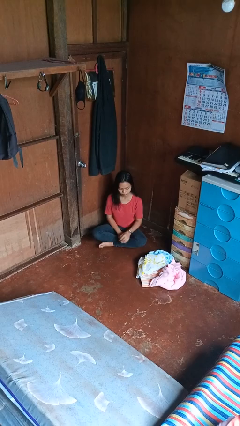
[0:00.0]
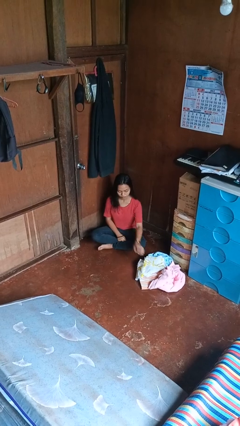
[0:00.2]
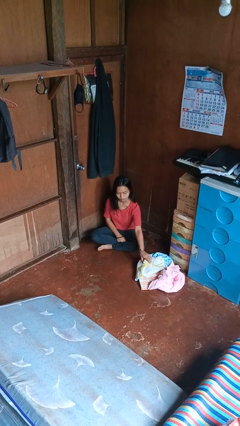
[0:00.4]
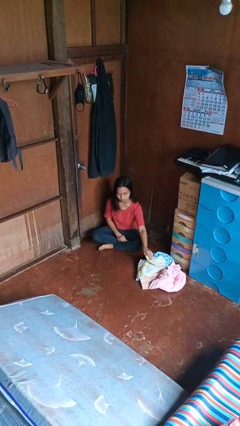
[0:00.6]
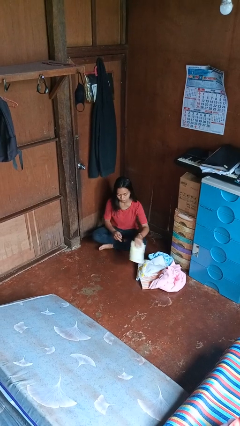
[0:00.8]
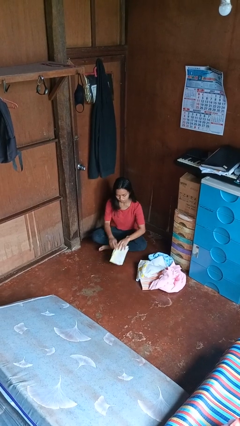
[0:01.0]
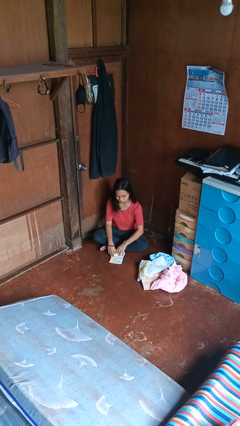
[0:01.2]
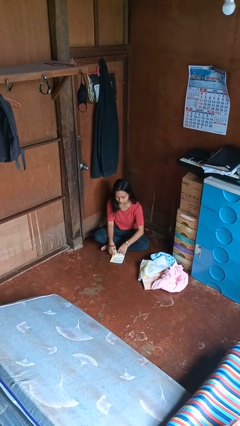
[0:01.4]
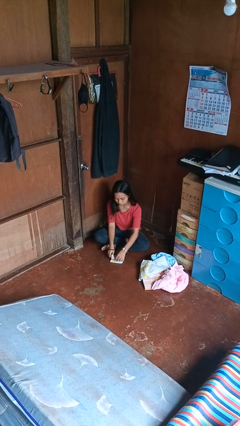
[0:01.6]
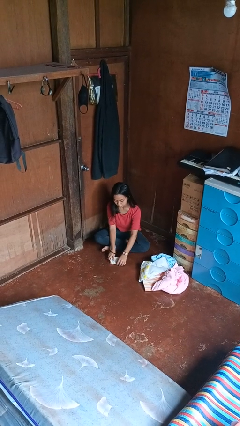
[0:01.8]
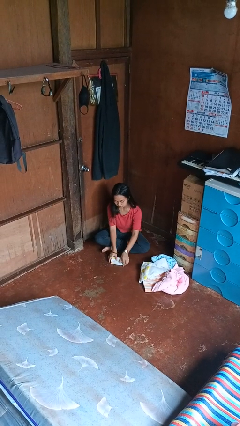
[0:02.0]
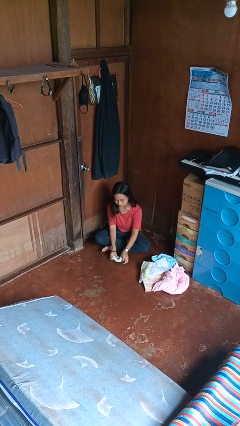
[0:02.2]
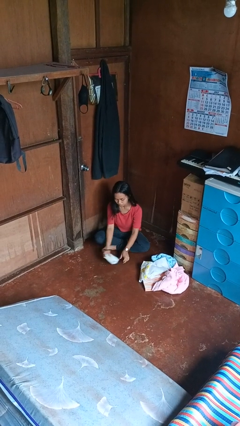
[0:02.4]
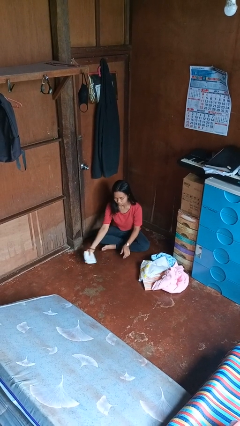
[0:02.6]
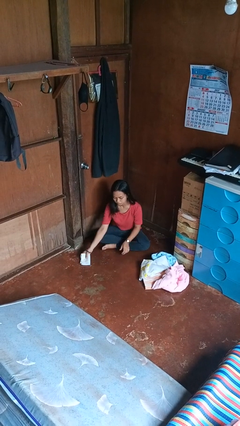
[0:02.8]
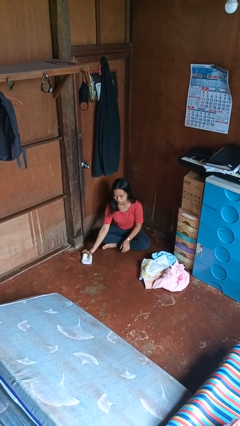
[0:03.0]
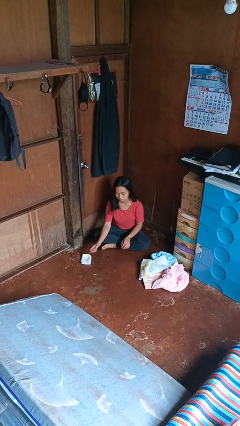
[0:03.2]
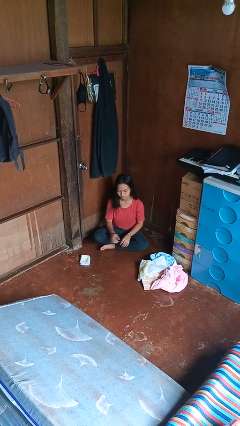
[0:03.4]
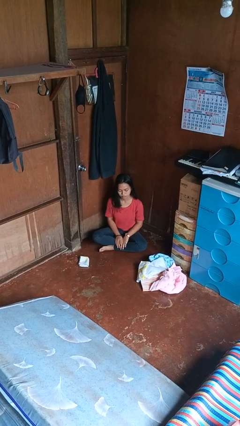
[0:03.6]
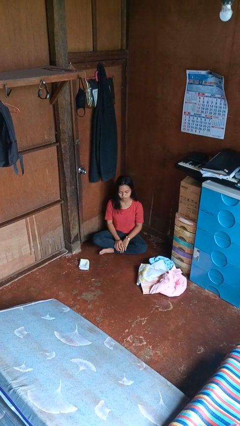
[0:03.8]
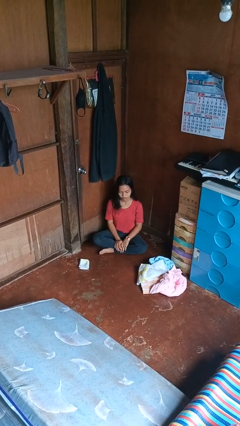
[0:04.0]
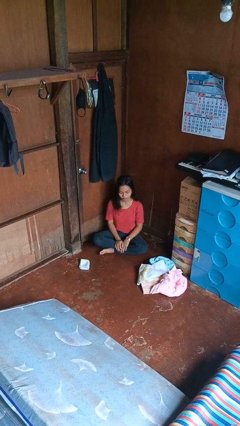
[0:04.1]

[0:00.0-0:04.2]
person folds towel

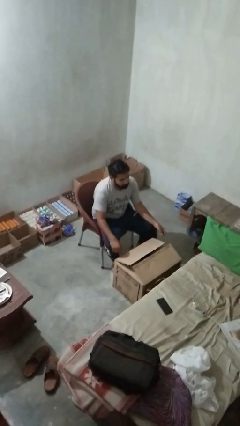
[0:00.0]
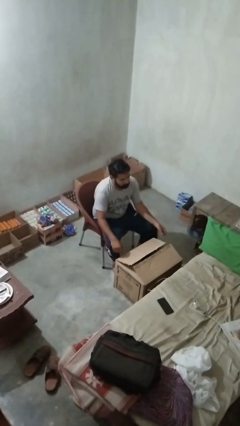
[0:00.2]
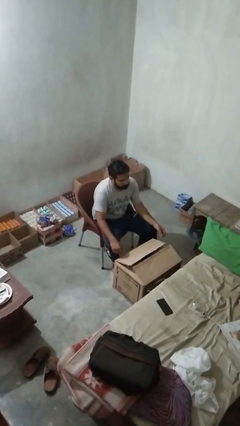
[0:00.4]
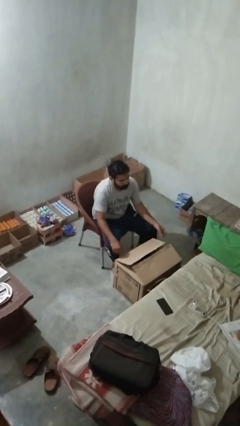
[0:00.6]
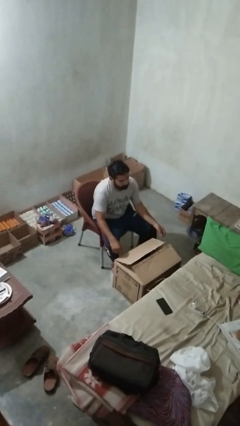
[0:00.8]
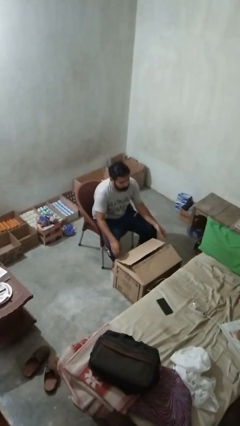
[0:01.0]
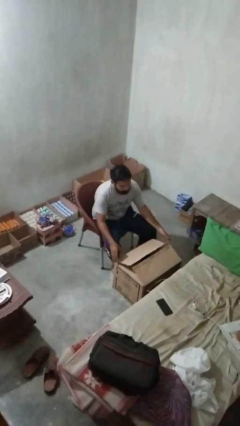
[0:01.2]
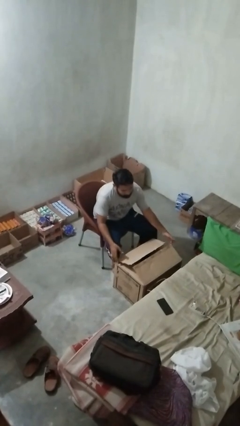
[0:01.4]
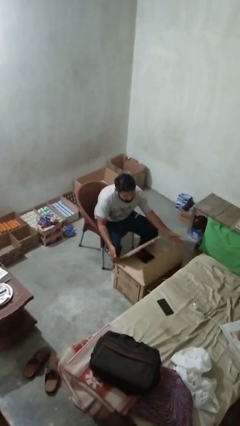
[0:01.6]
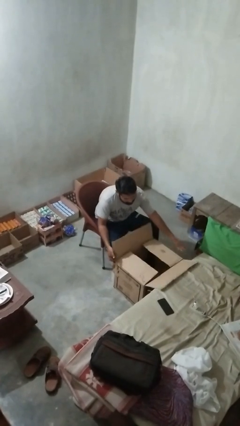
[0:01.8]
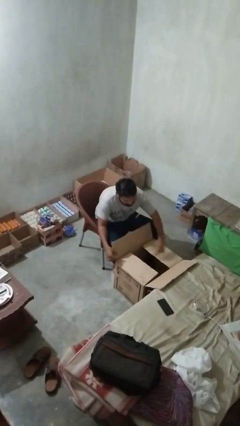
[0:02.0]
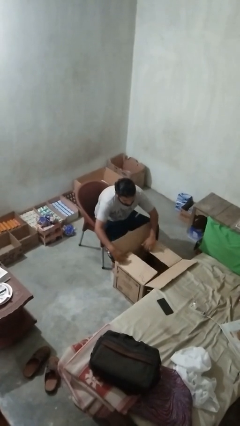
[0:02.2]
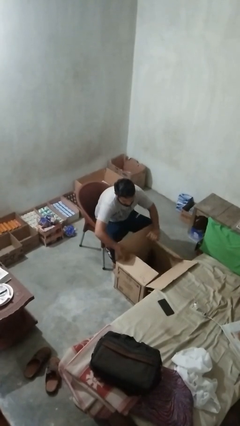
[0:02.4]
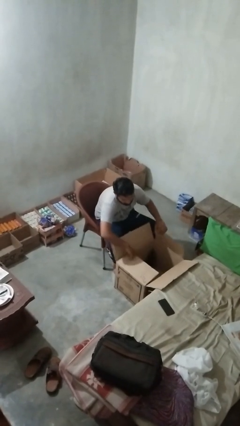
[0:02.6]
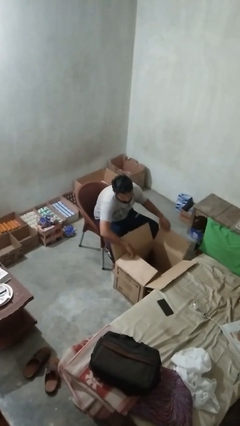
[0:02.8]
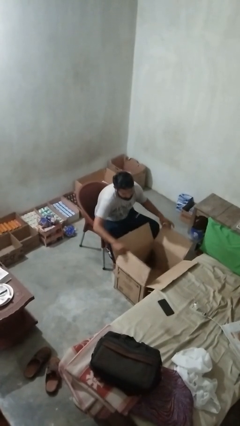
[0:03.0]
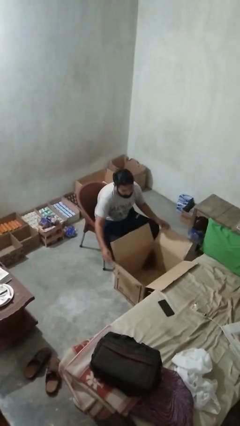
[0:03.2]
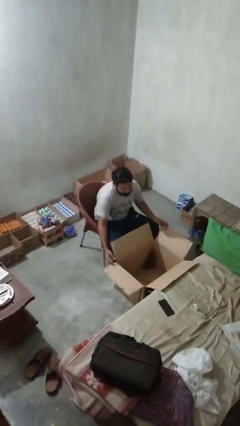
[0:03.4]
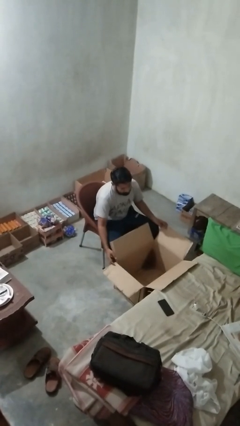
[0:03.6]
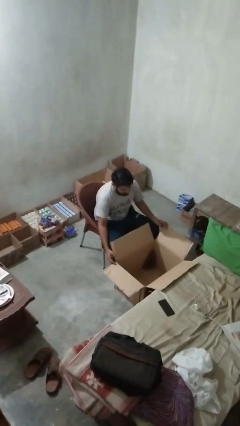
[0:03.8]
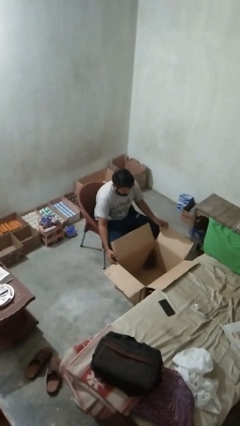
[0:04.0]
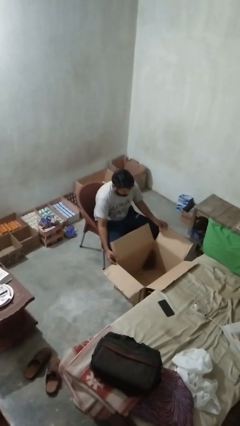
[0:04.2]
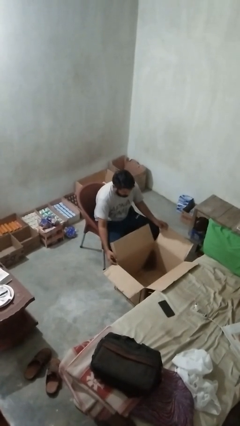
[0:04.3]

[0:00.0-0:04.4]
person opens box

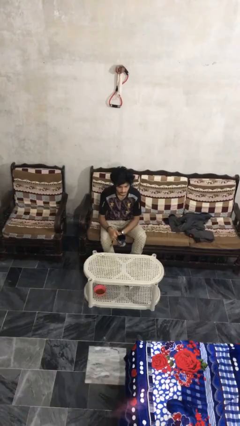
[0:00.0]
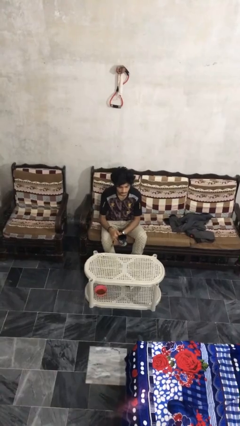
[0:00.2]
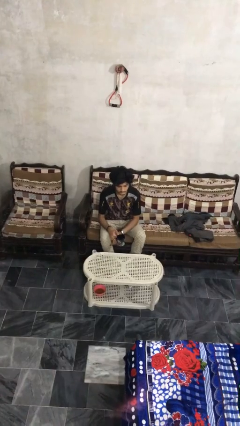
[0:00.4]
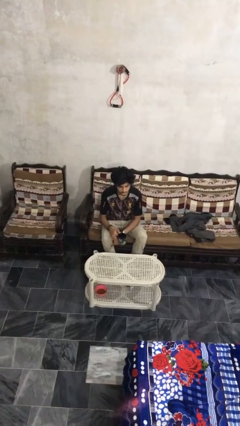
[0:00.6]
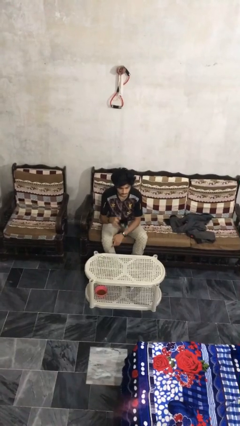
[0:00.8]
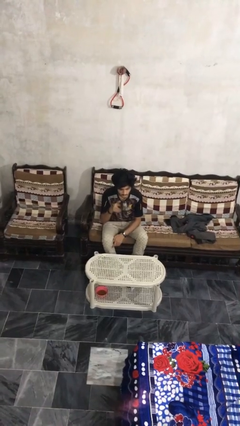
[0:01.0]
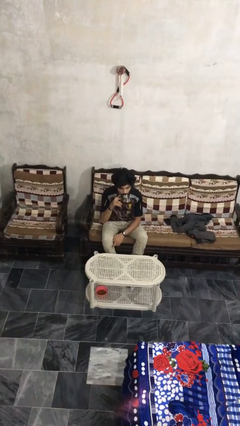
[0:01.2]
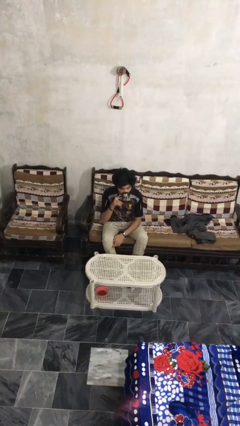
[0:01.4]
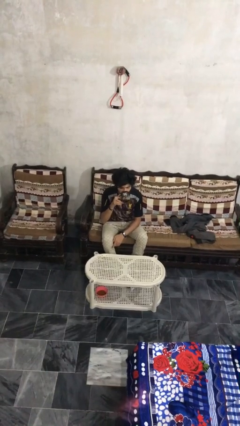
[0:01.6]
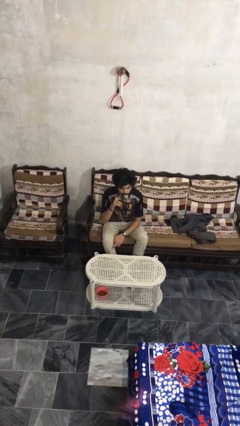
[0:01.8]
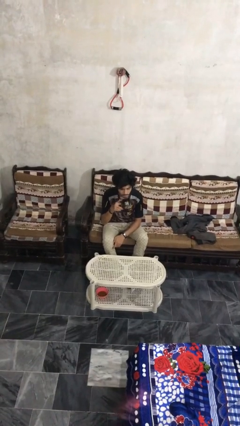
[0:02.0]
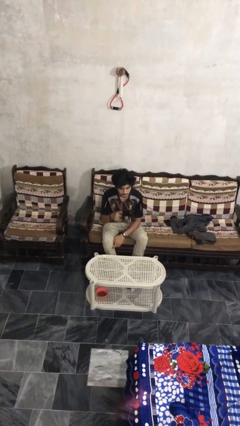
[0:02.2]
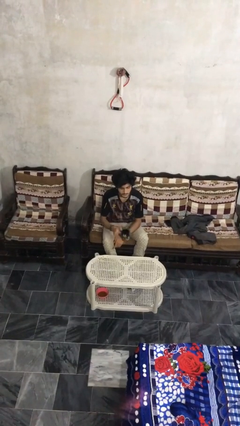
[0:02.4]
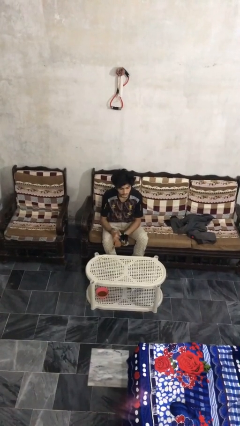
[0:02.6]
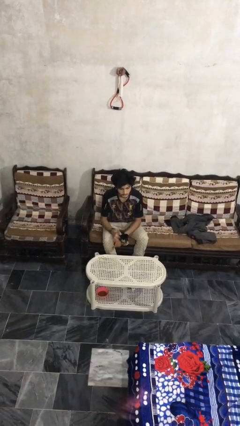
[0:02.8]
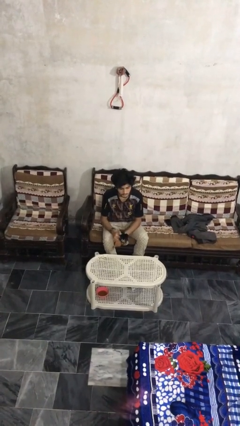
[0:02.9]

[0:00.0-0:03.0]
person drinks from mug

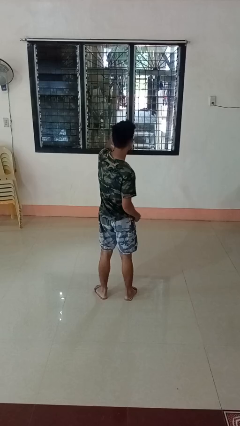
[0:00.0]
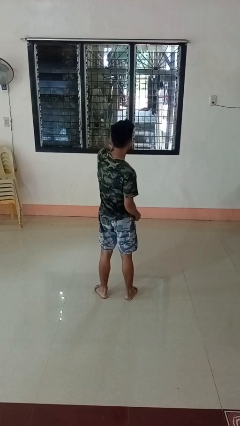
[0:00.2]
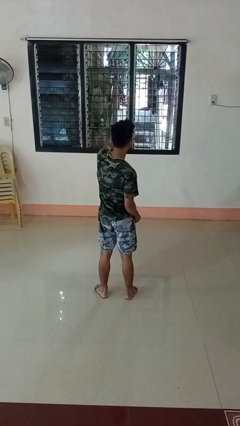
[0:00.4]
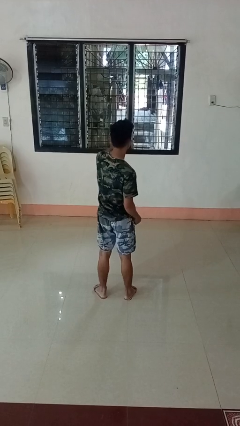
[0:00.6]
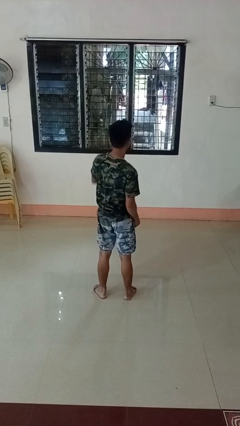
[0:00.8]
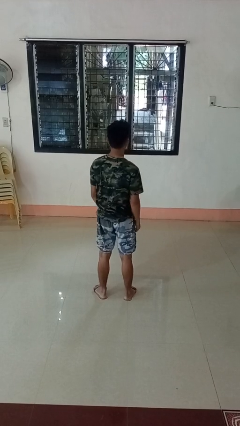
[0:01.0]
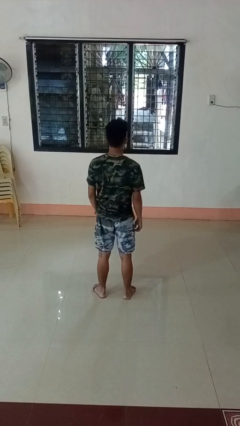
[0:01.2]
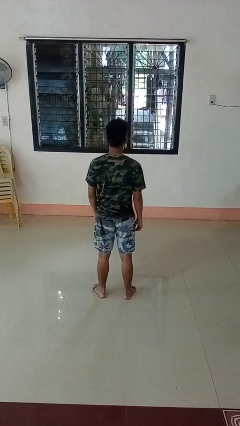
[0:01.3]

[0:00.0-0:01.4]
person punches

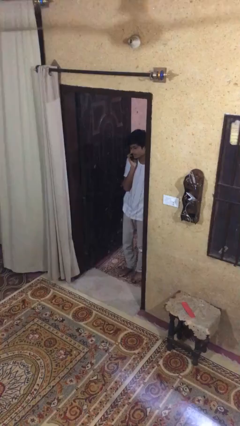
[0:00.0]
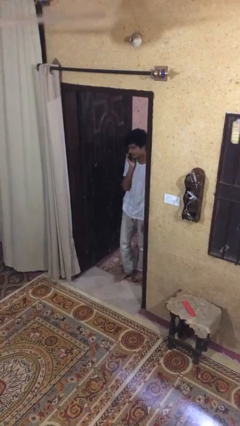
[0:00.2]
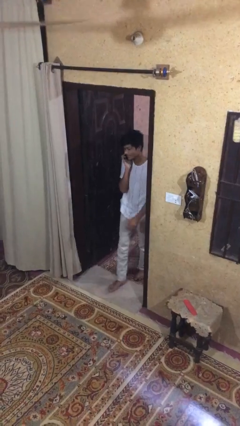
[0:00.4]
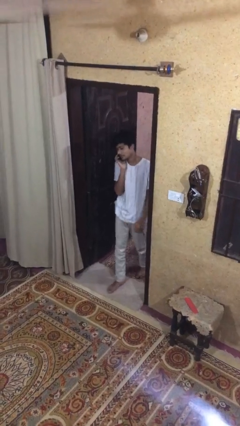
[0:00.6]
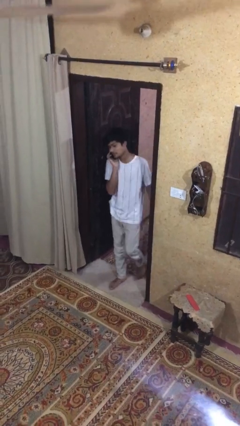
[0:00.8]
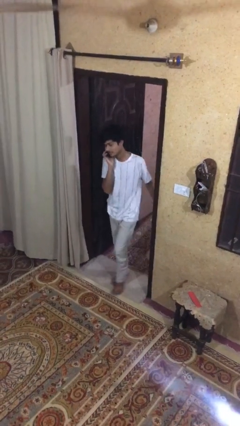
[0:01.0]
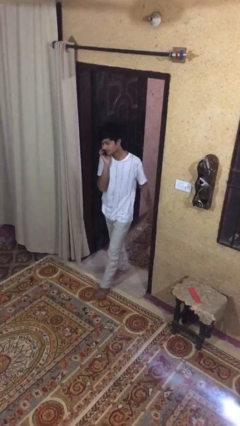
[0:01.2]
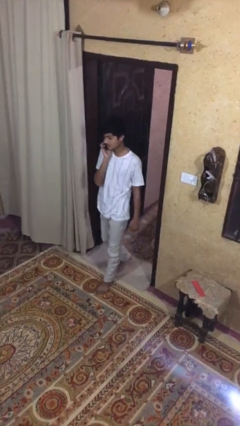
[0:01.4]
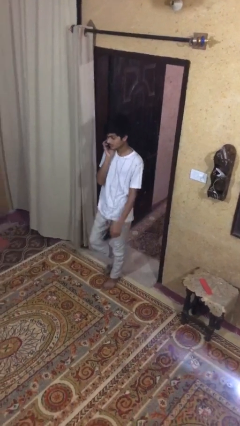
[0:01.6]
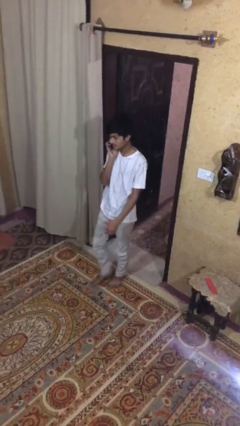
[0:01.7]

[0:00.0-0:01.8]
person enters scene through structure

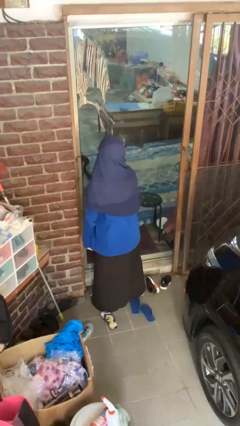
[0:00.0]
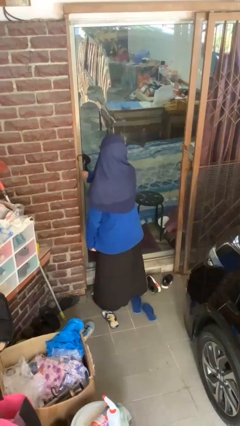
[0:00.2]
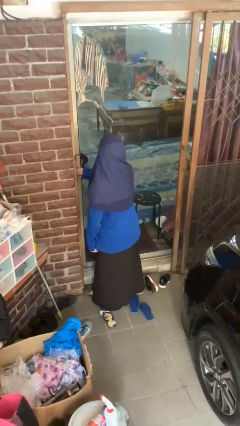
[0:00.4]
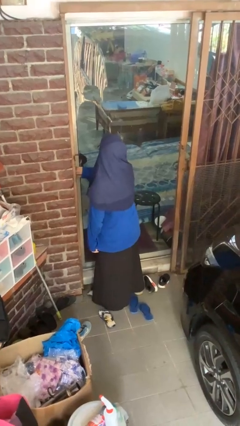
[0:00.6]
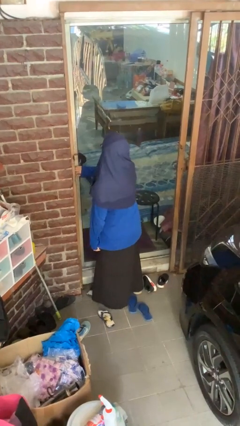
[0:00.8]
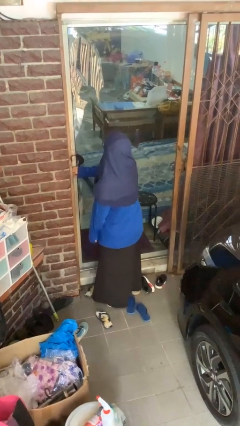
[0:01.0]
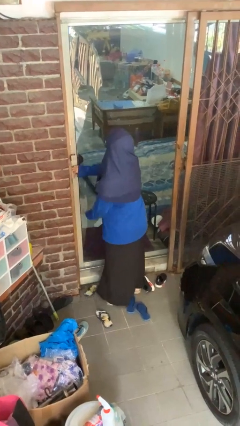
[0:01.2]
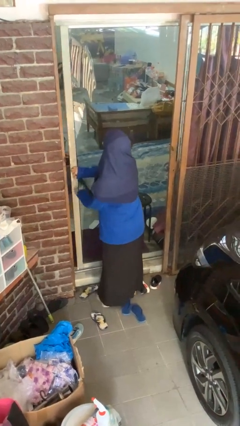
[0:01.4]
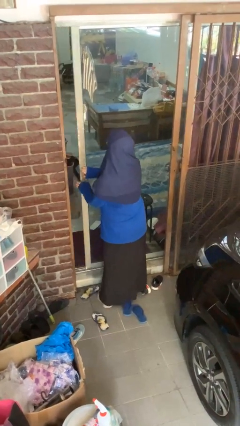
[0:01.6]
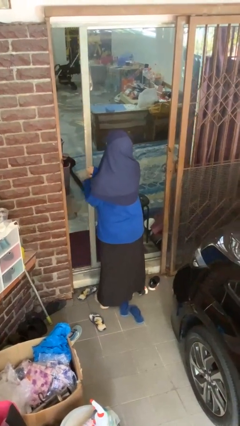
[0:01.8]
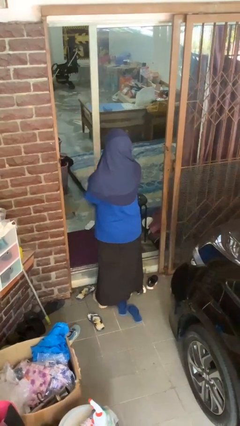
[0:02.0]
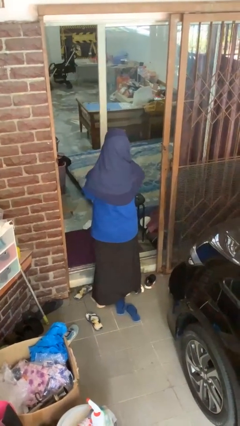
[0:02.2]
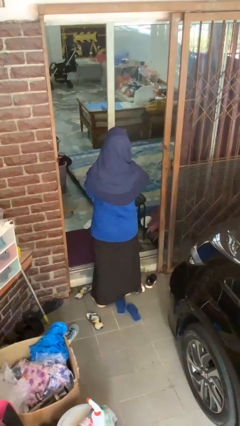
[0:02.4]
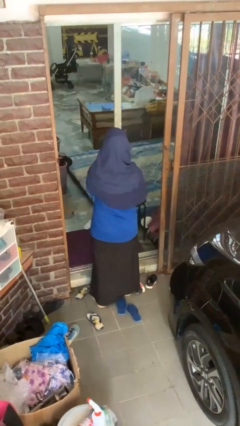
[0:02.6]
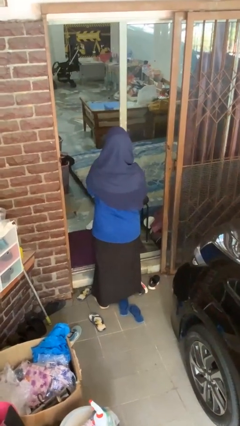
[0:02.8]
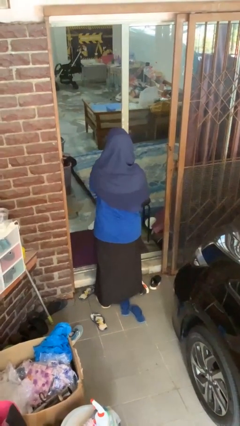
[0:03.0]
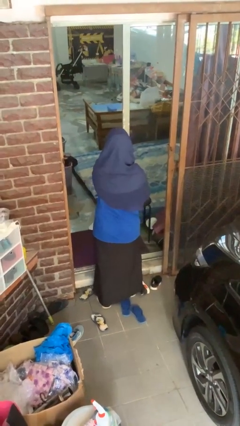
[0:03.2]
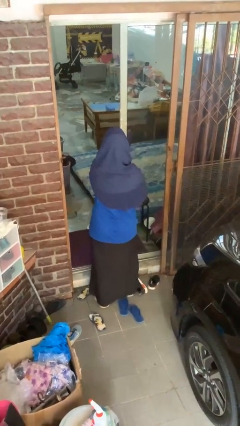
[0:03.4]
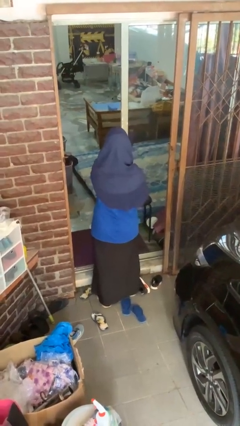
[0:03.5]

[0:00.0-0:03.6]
person opens sliding door
